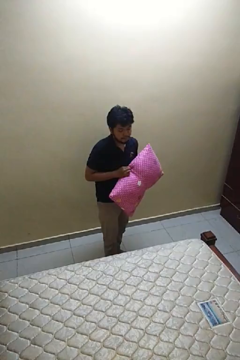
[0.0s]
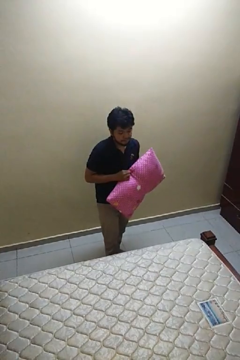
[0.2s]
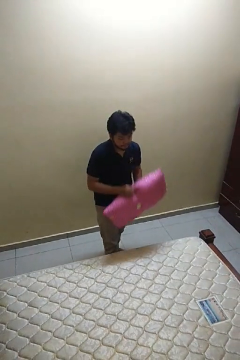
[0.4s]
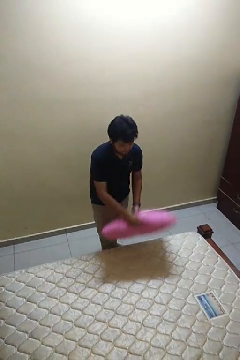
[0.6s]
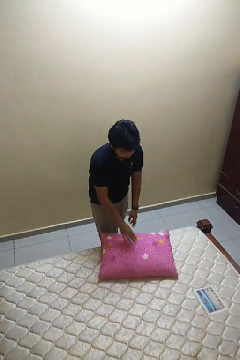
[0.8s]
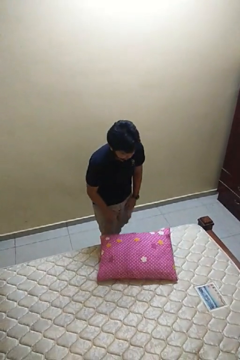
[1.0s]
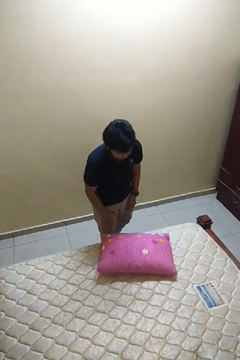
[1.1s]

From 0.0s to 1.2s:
person puts down object on bed

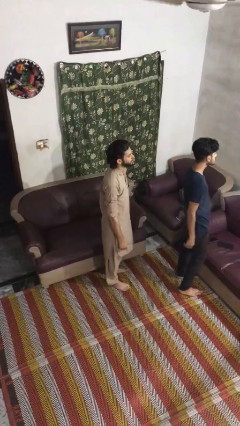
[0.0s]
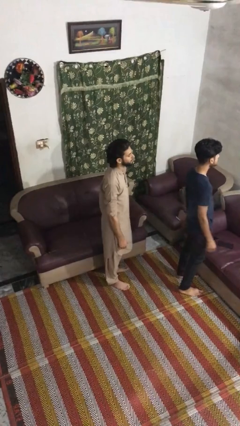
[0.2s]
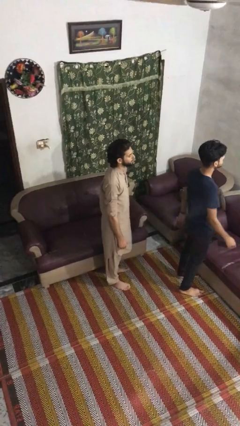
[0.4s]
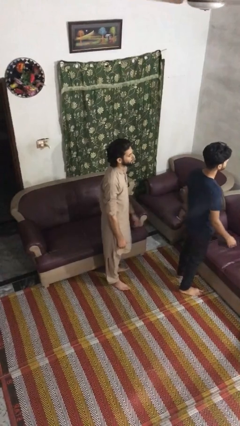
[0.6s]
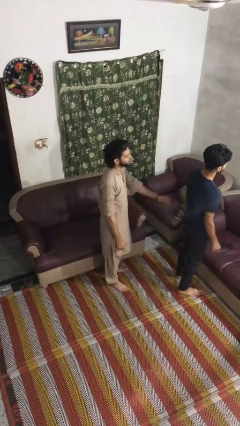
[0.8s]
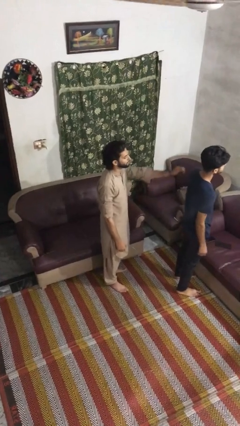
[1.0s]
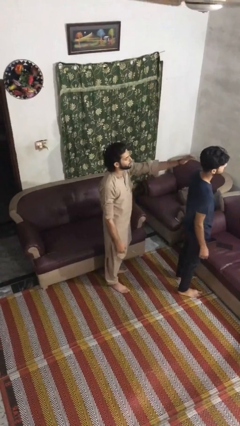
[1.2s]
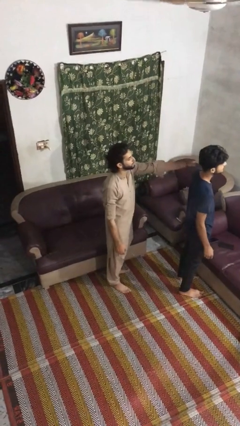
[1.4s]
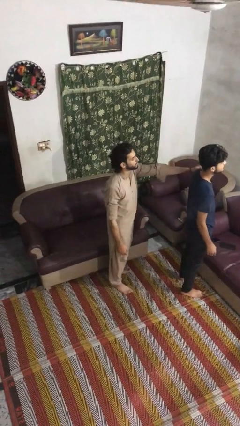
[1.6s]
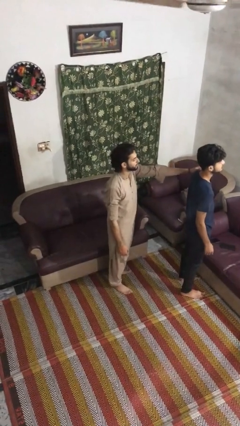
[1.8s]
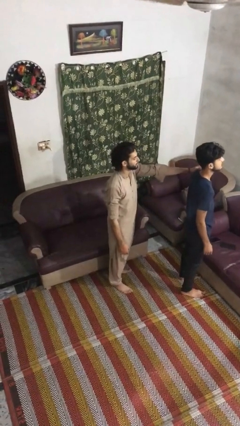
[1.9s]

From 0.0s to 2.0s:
person grabs person by shoulder

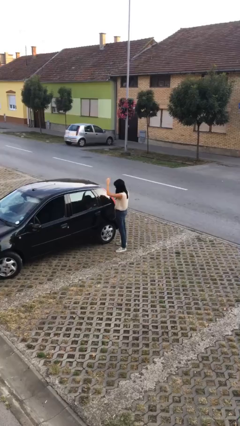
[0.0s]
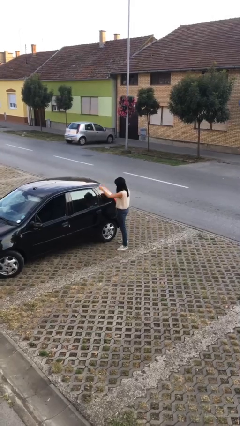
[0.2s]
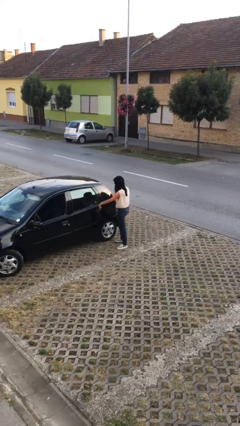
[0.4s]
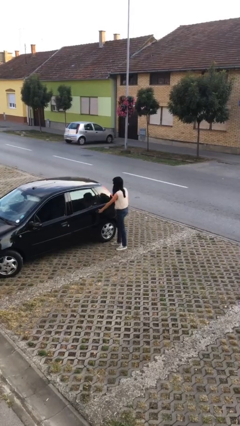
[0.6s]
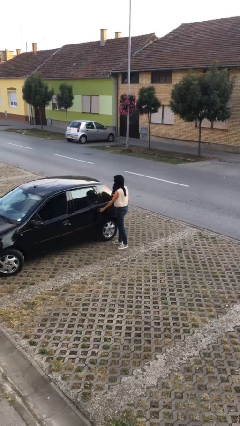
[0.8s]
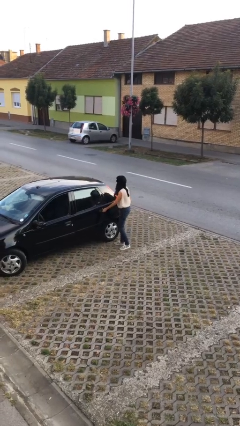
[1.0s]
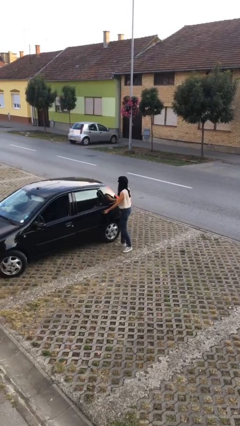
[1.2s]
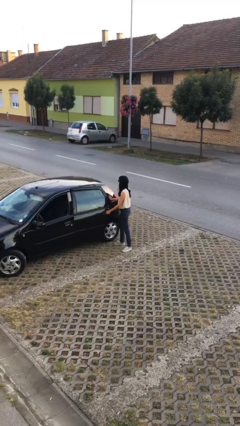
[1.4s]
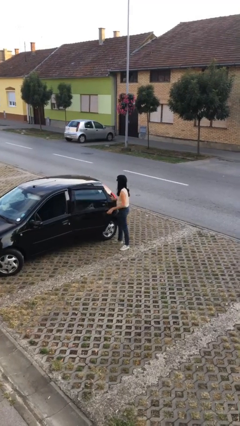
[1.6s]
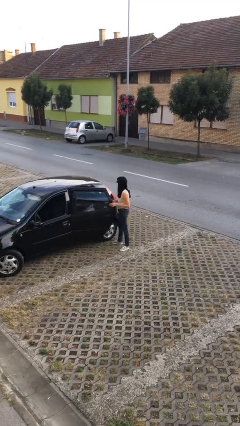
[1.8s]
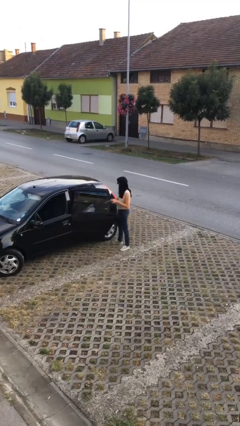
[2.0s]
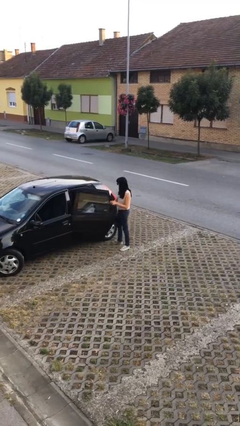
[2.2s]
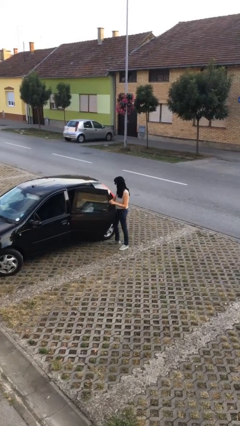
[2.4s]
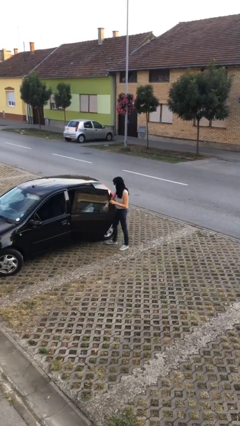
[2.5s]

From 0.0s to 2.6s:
person opens car door

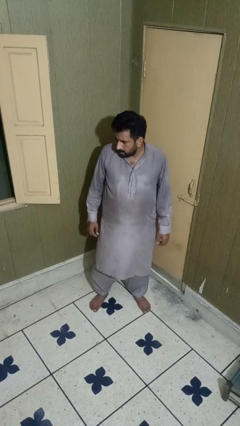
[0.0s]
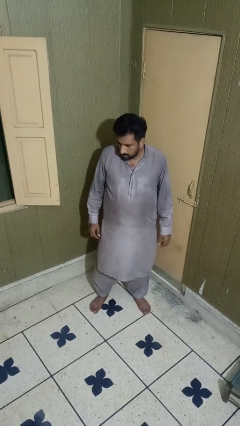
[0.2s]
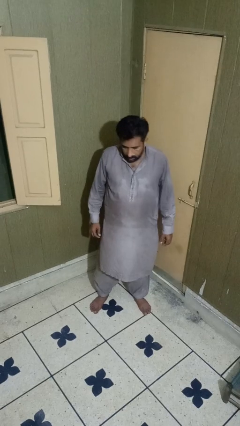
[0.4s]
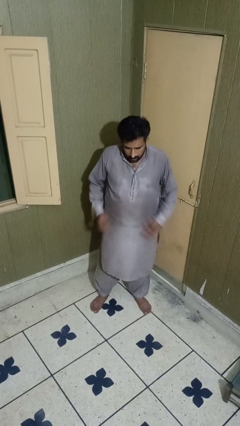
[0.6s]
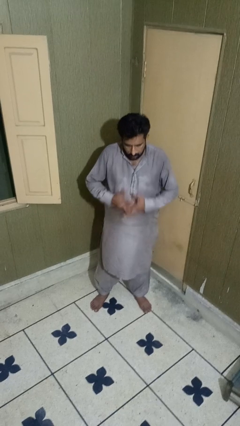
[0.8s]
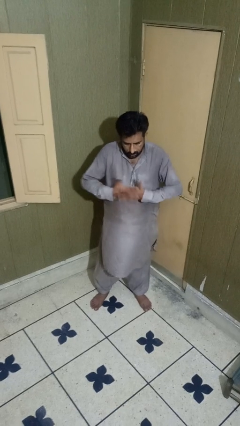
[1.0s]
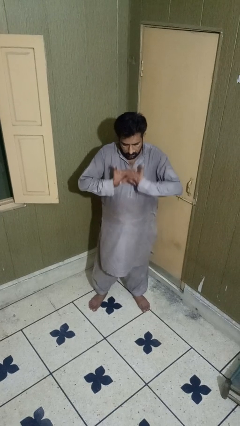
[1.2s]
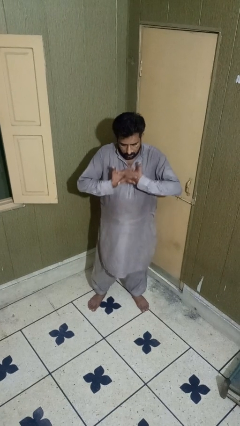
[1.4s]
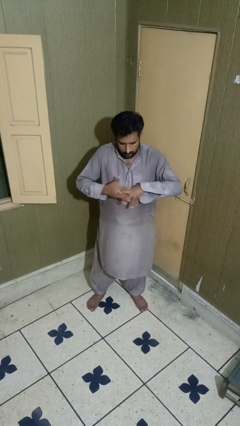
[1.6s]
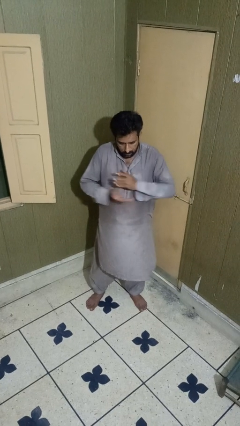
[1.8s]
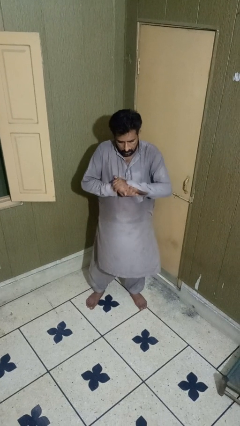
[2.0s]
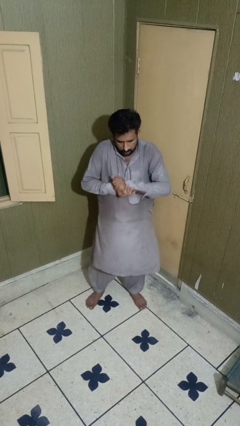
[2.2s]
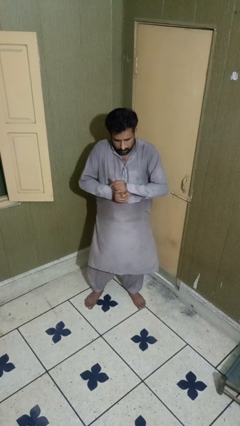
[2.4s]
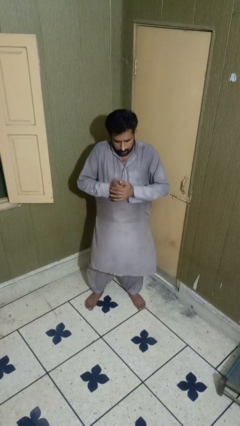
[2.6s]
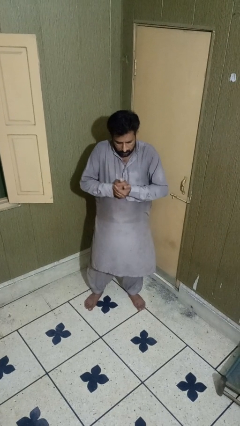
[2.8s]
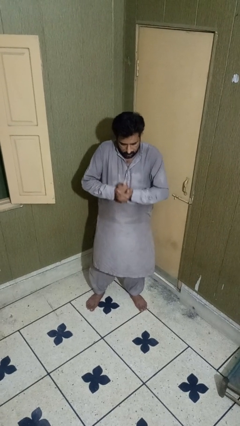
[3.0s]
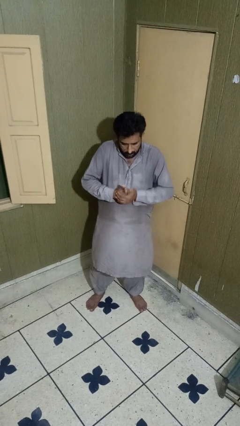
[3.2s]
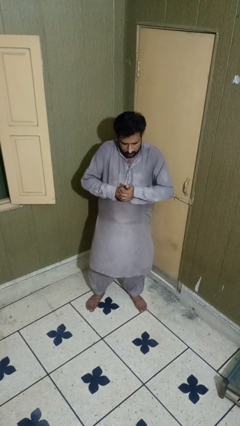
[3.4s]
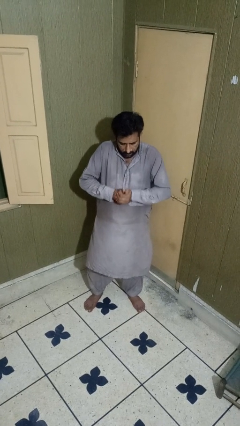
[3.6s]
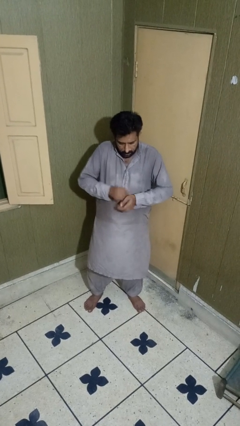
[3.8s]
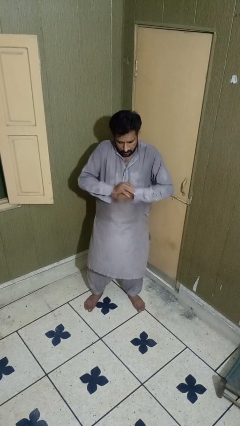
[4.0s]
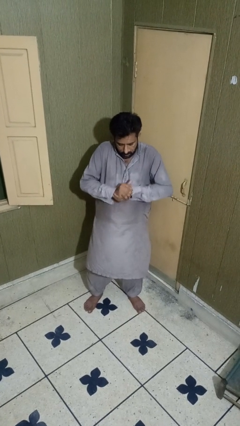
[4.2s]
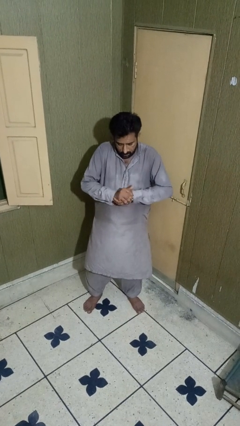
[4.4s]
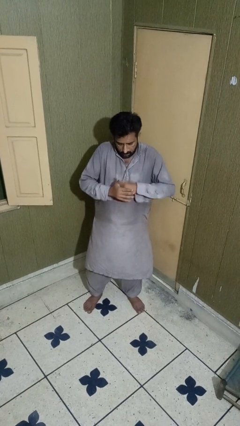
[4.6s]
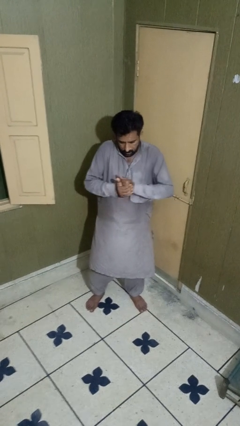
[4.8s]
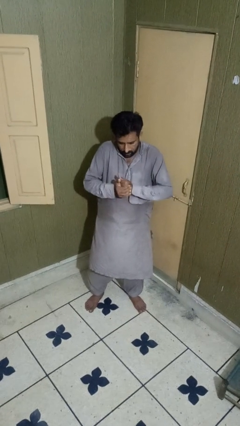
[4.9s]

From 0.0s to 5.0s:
person cracks knuckles

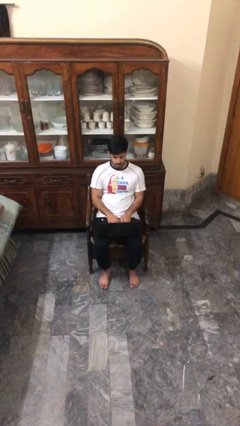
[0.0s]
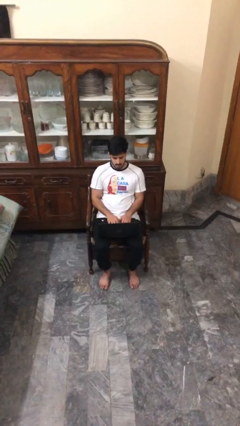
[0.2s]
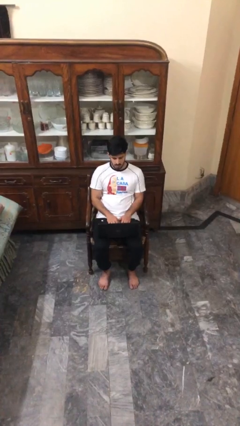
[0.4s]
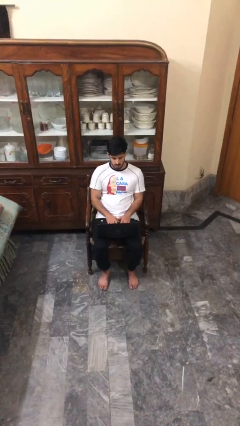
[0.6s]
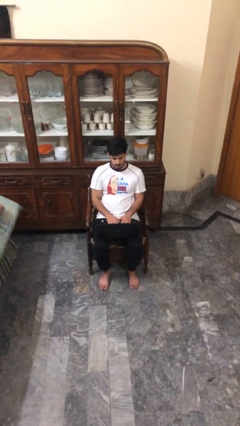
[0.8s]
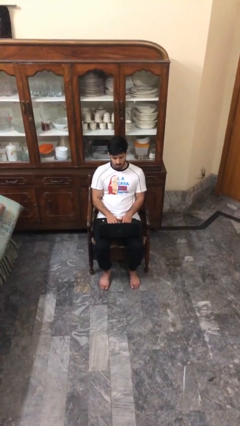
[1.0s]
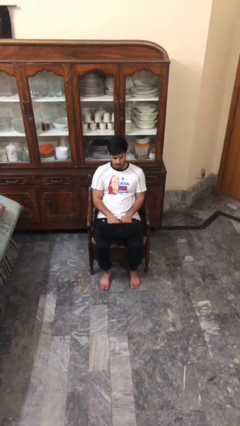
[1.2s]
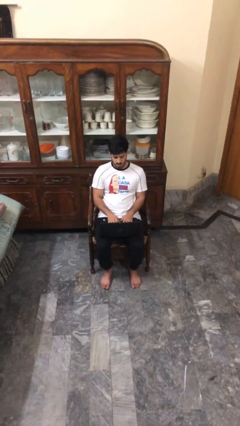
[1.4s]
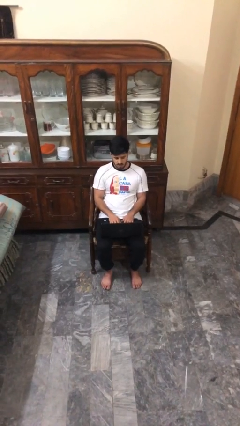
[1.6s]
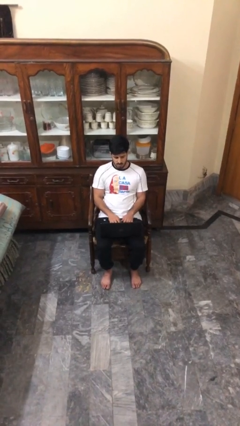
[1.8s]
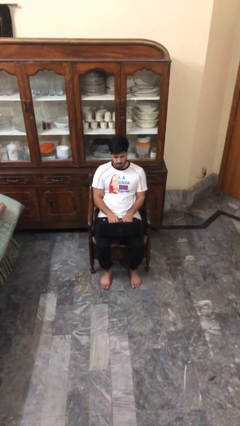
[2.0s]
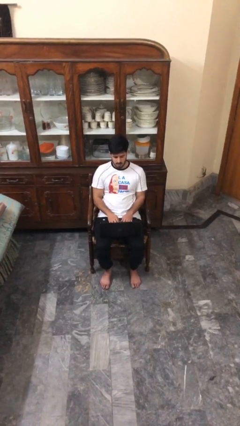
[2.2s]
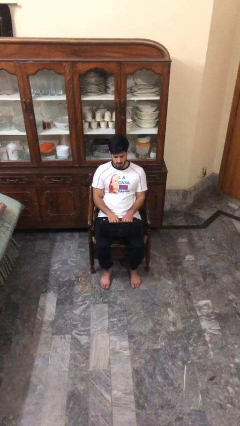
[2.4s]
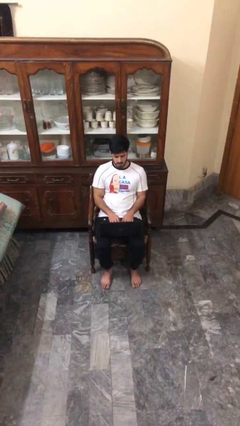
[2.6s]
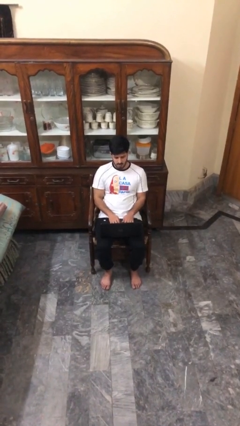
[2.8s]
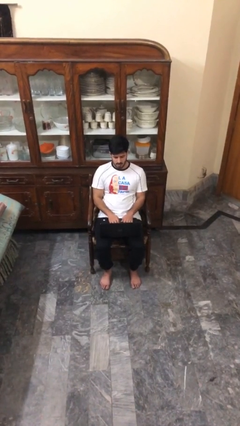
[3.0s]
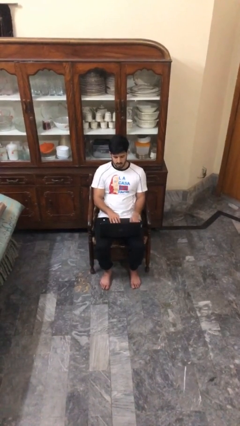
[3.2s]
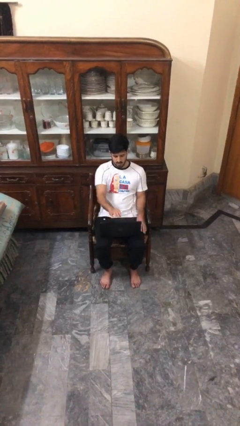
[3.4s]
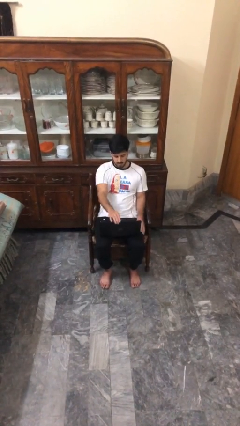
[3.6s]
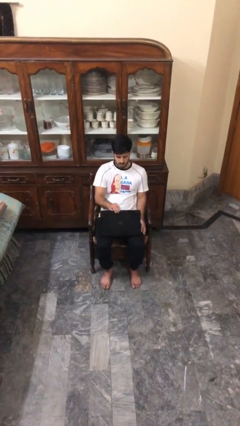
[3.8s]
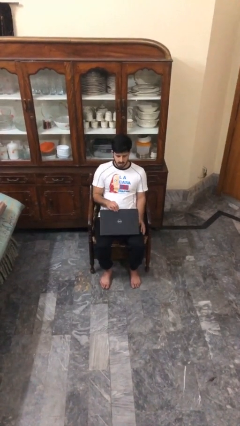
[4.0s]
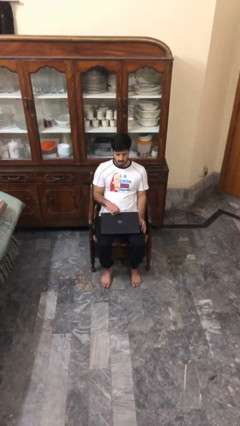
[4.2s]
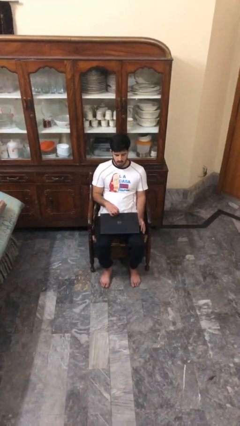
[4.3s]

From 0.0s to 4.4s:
person interacts with laptop

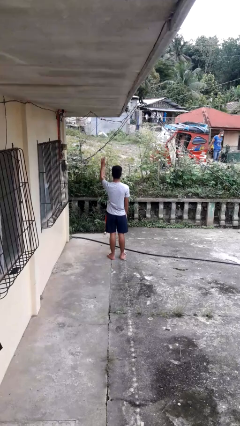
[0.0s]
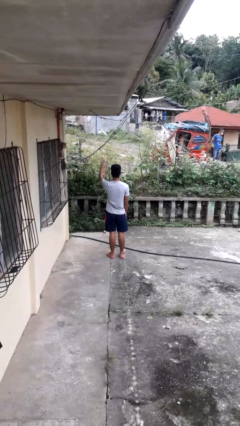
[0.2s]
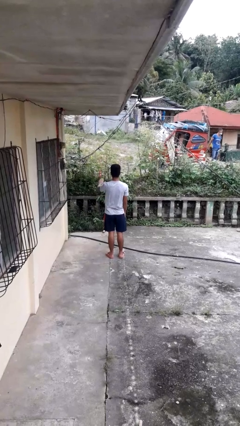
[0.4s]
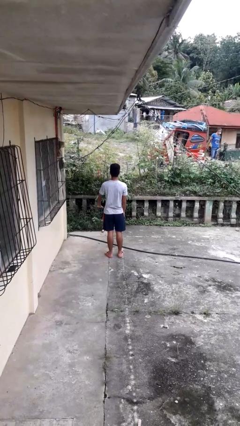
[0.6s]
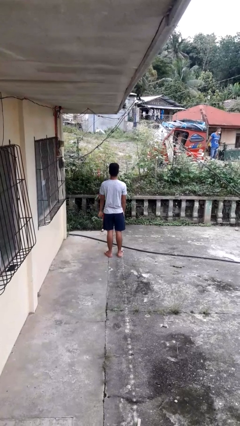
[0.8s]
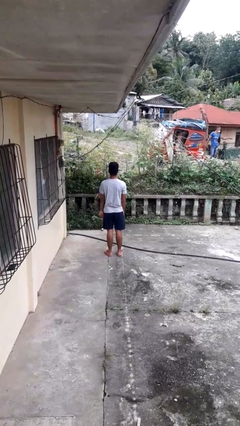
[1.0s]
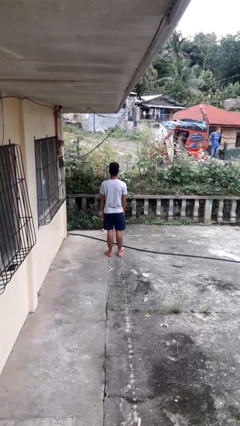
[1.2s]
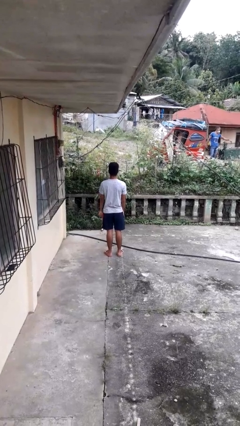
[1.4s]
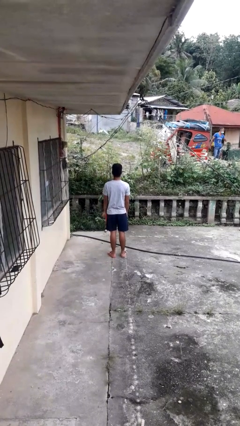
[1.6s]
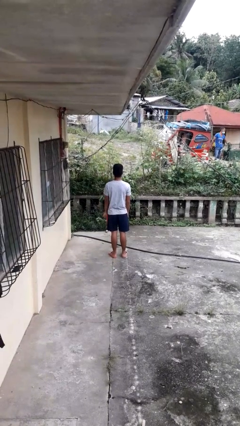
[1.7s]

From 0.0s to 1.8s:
person gestures swipe down

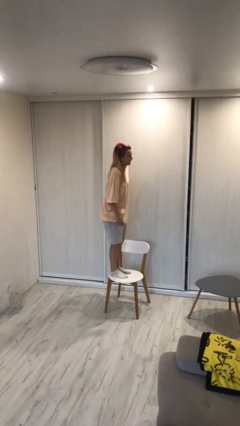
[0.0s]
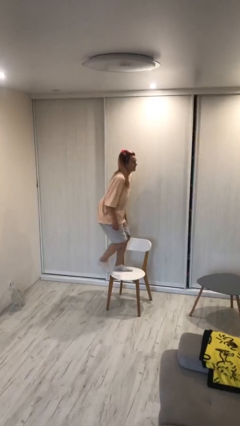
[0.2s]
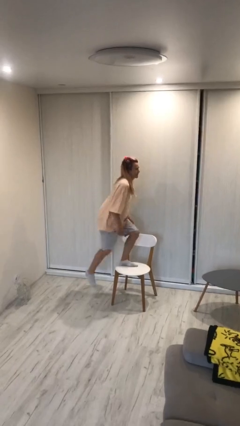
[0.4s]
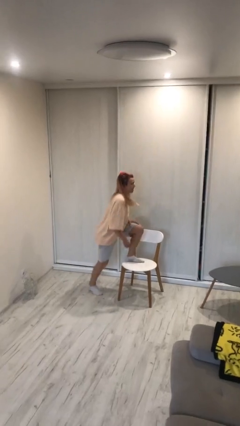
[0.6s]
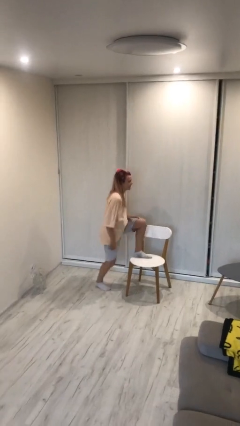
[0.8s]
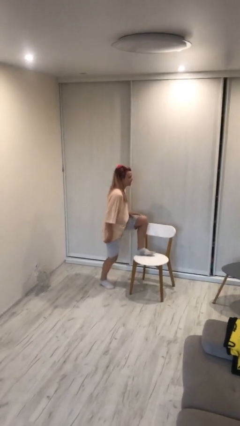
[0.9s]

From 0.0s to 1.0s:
person climbs off chair
